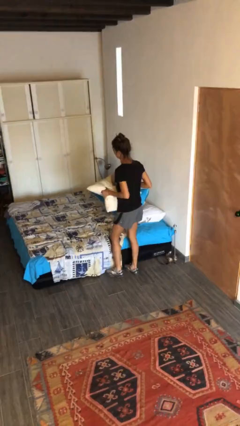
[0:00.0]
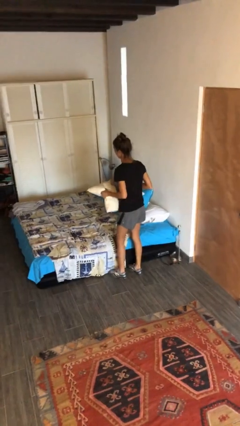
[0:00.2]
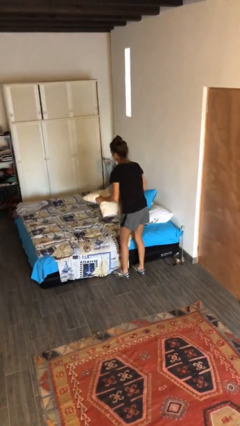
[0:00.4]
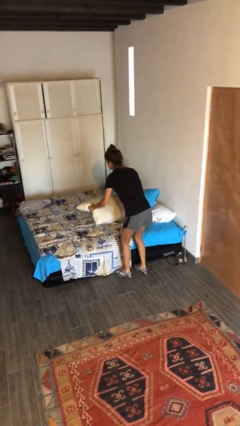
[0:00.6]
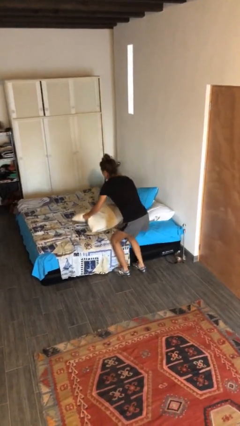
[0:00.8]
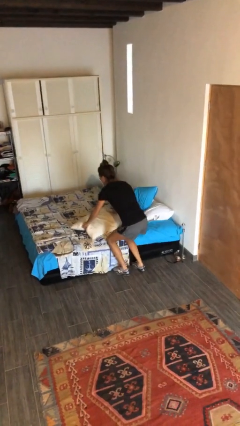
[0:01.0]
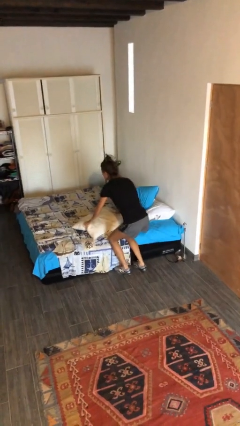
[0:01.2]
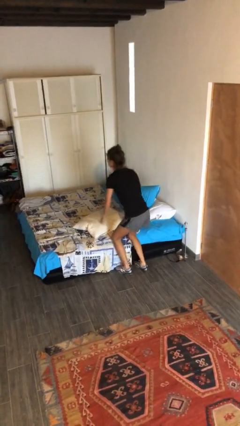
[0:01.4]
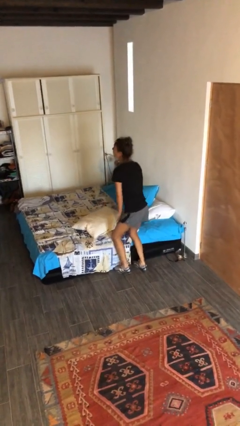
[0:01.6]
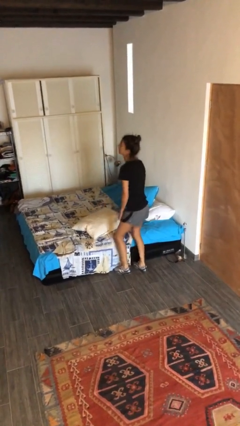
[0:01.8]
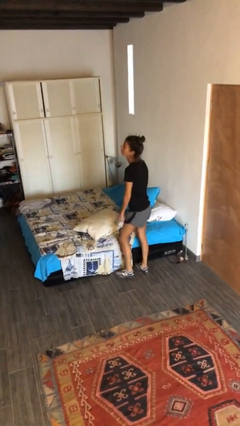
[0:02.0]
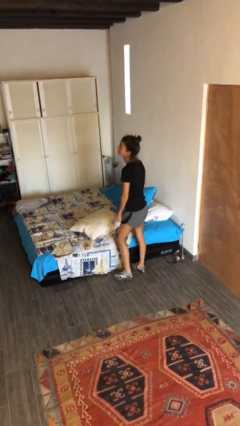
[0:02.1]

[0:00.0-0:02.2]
person puts down object on bed

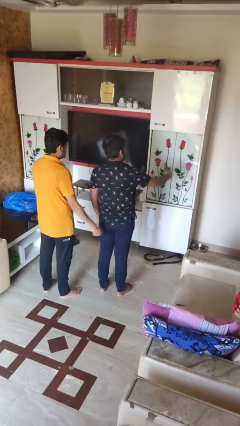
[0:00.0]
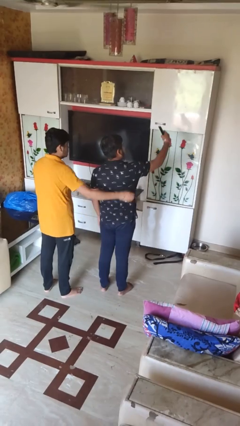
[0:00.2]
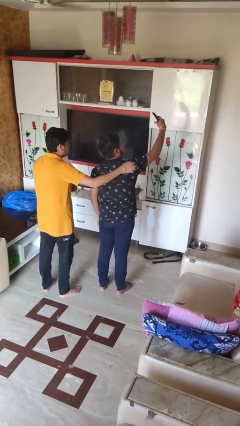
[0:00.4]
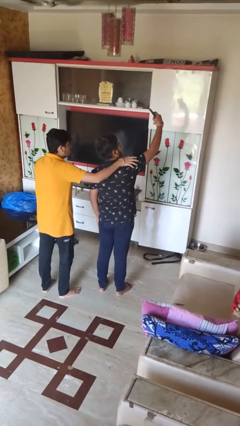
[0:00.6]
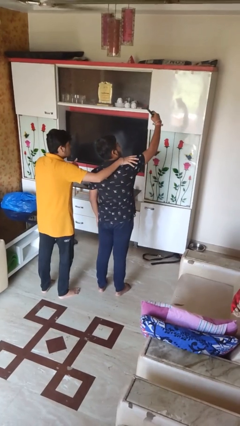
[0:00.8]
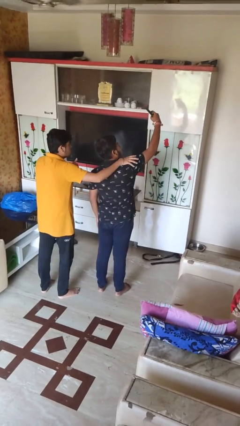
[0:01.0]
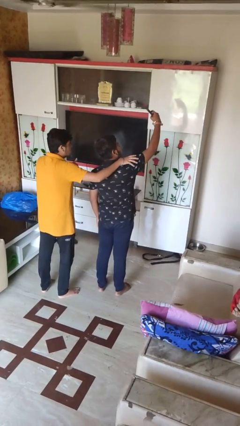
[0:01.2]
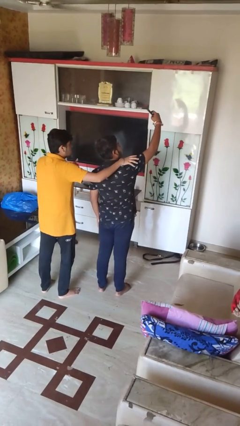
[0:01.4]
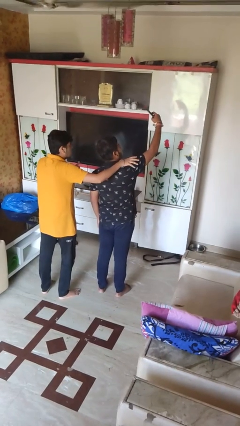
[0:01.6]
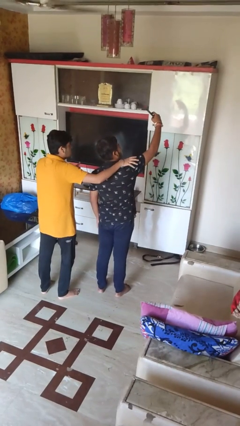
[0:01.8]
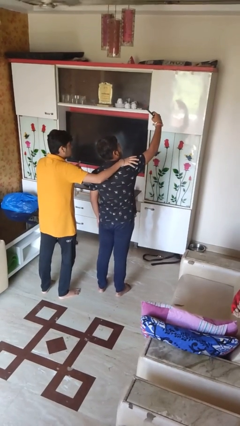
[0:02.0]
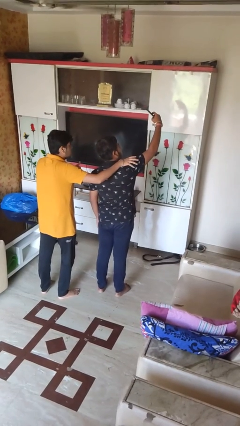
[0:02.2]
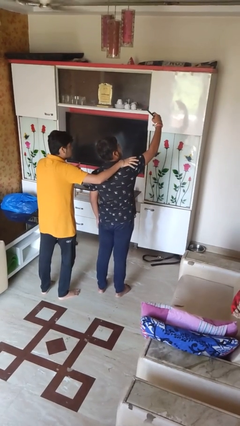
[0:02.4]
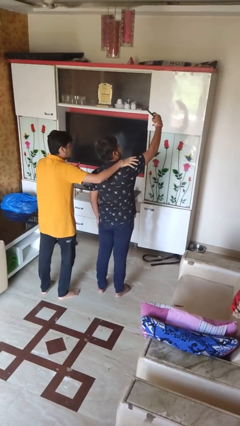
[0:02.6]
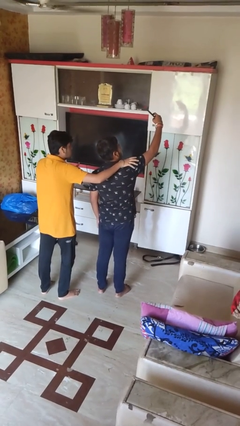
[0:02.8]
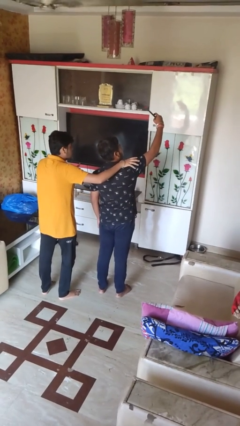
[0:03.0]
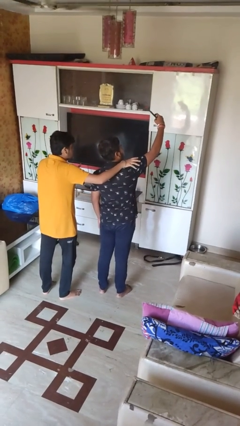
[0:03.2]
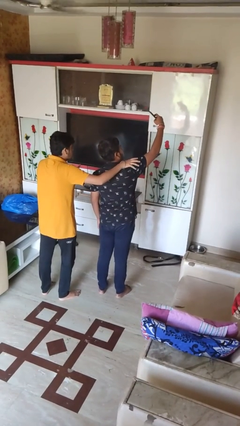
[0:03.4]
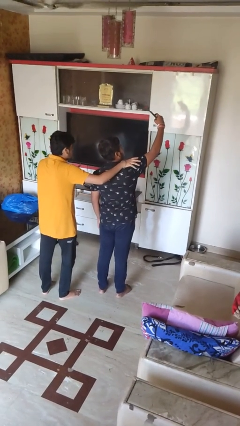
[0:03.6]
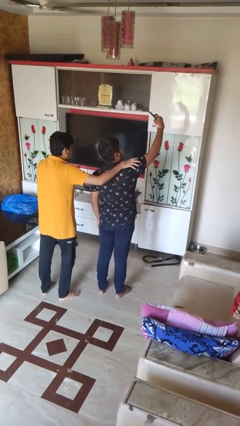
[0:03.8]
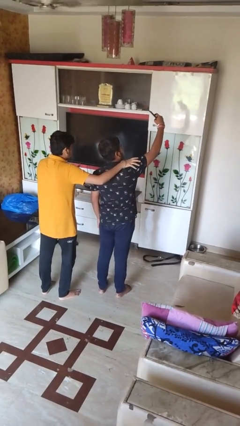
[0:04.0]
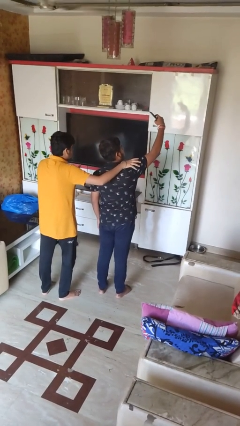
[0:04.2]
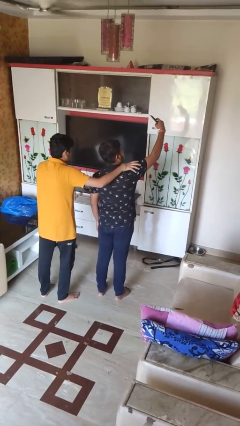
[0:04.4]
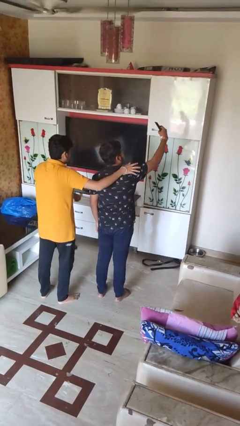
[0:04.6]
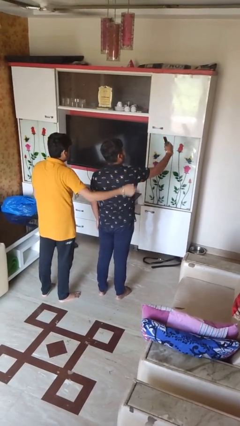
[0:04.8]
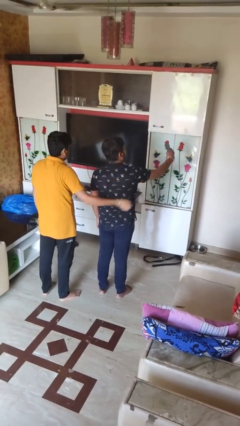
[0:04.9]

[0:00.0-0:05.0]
person takes selfie with person

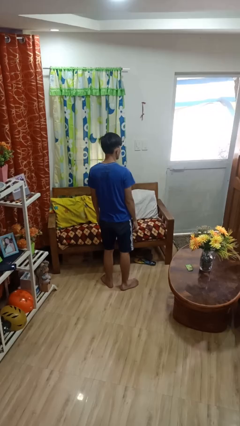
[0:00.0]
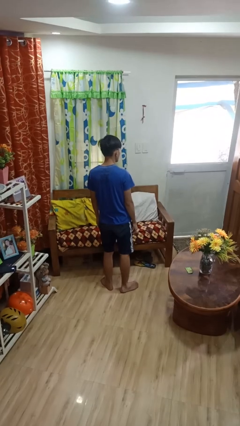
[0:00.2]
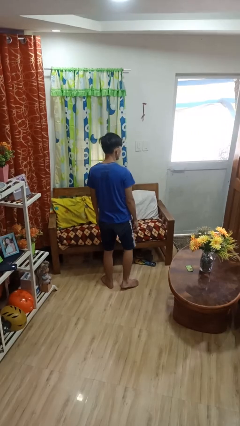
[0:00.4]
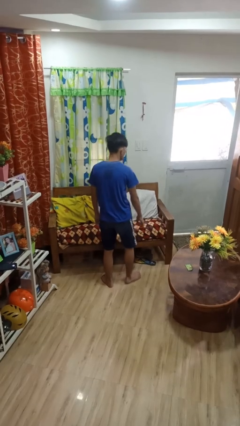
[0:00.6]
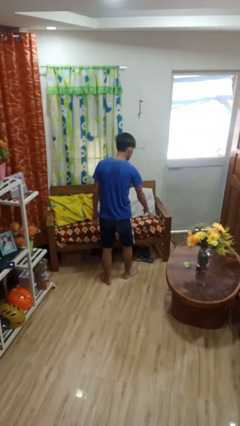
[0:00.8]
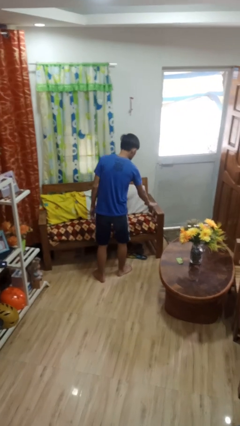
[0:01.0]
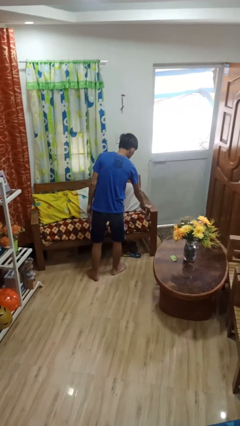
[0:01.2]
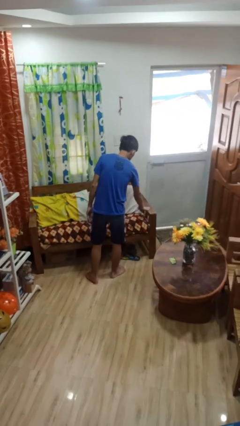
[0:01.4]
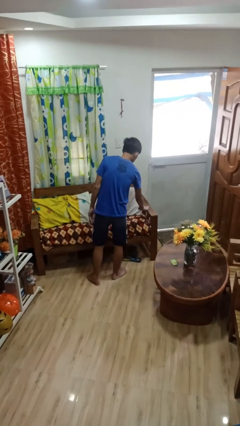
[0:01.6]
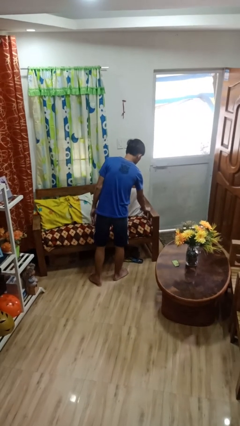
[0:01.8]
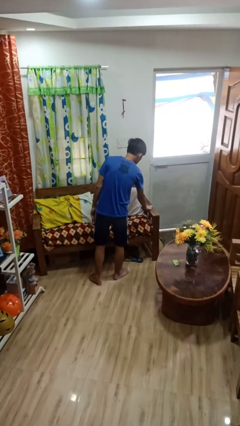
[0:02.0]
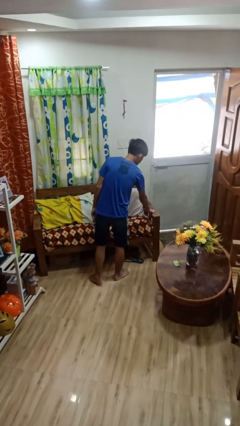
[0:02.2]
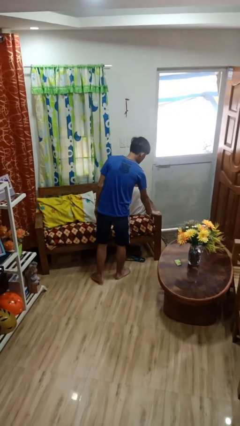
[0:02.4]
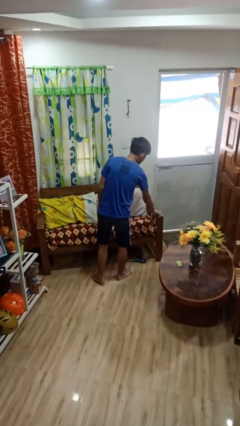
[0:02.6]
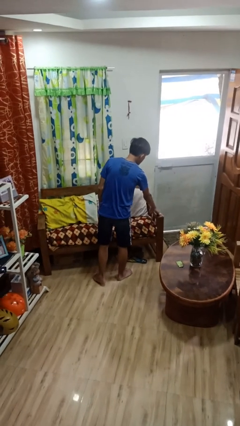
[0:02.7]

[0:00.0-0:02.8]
person taps object with finger

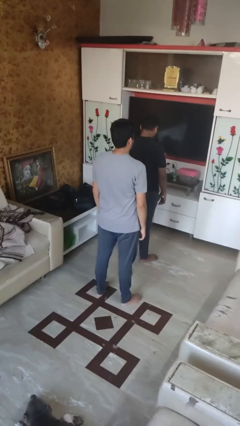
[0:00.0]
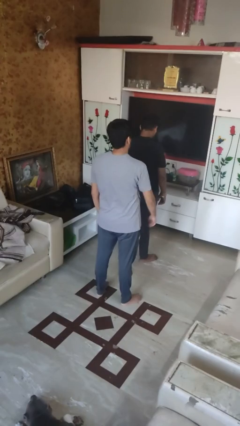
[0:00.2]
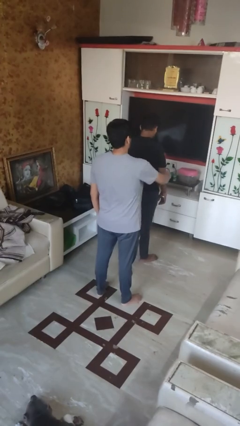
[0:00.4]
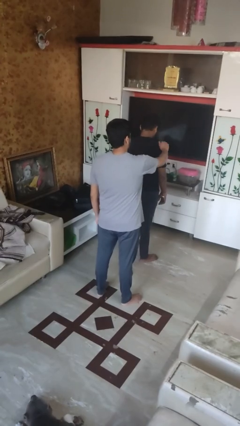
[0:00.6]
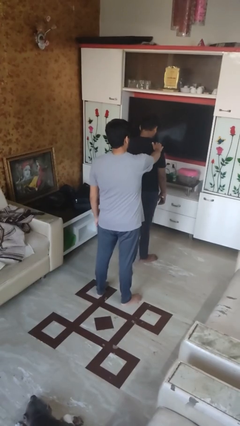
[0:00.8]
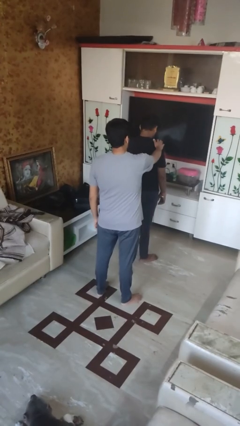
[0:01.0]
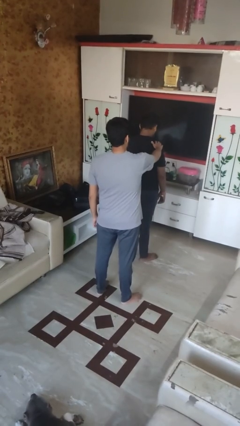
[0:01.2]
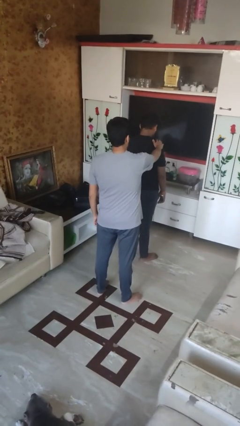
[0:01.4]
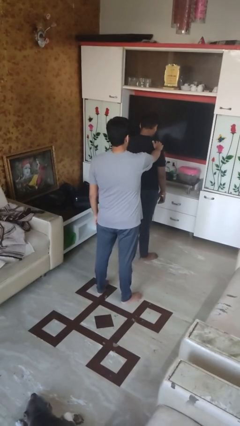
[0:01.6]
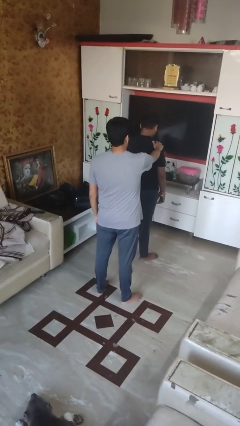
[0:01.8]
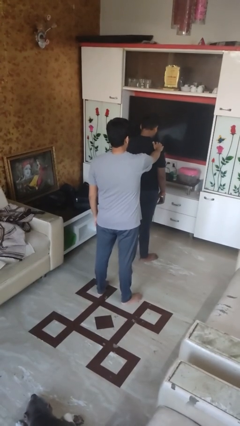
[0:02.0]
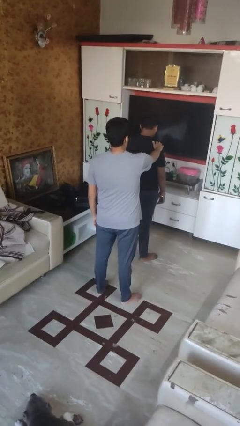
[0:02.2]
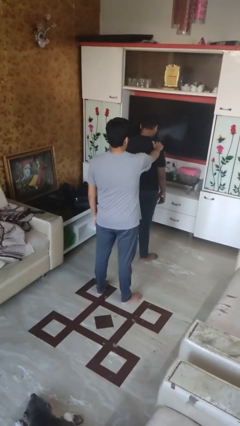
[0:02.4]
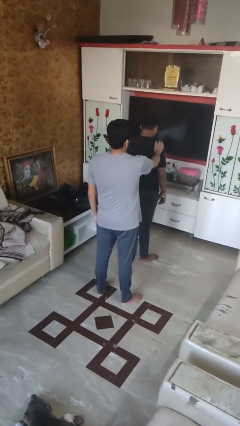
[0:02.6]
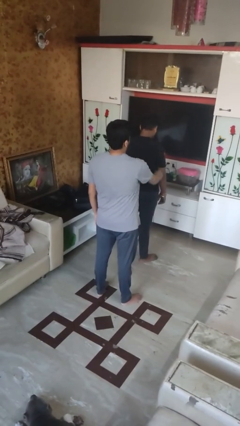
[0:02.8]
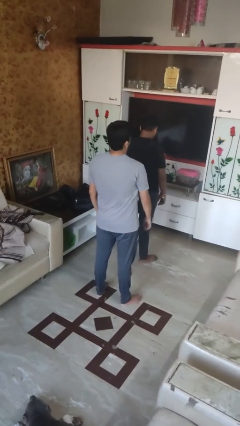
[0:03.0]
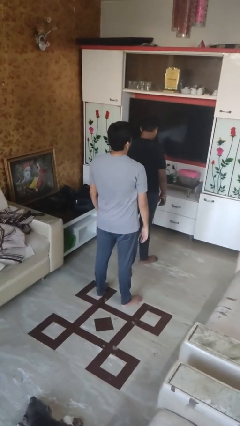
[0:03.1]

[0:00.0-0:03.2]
person pounds shoulders of person

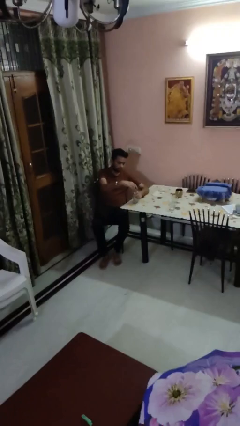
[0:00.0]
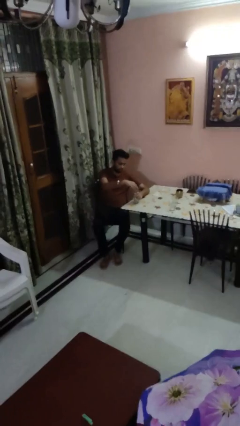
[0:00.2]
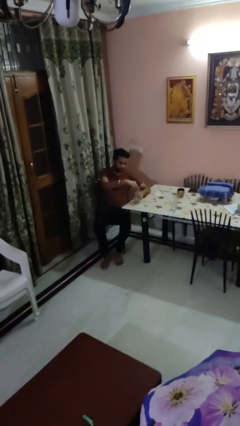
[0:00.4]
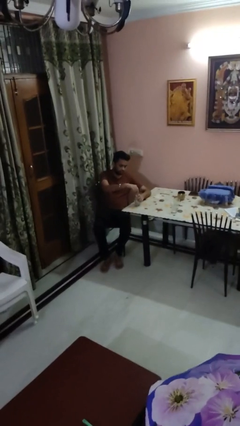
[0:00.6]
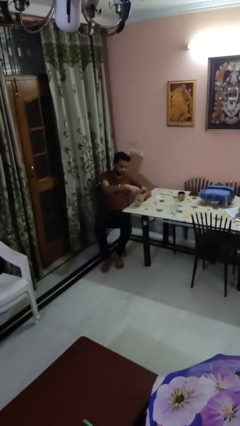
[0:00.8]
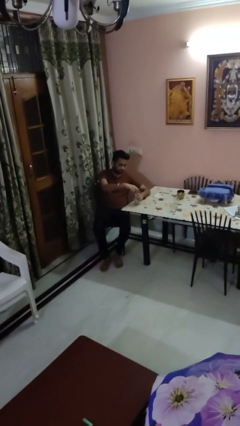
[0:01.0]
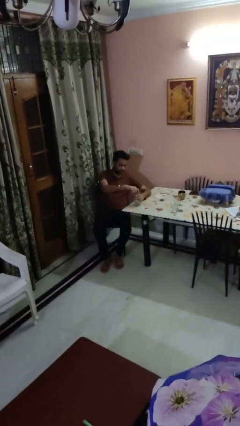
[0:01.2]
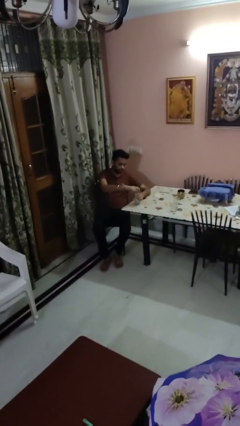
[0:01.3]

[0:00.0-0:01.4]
person screws lid to bottle

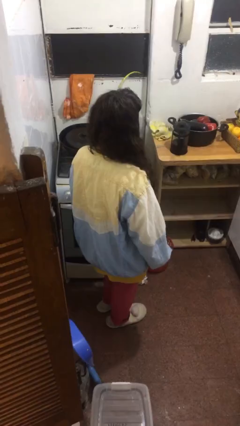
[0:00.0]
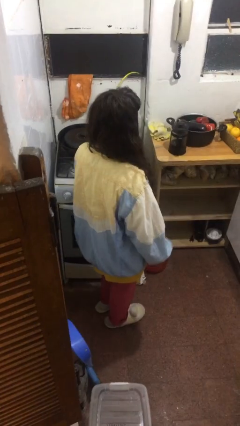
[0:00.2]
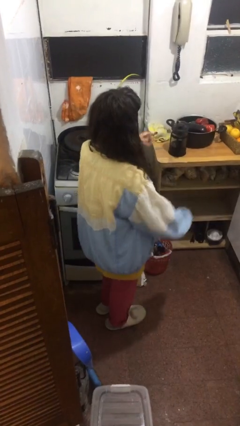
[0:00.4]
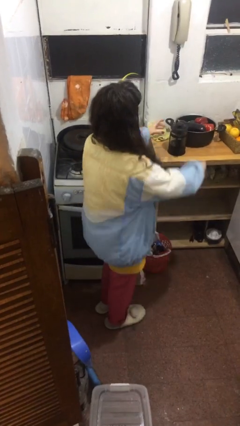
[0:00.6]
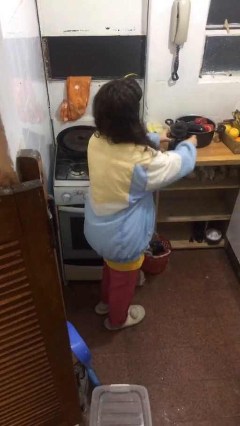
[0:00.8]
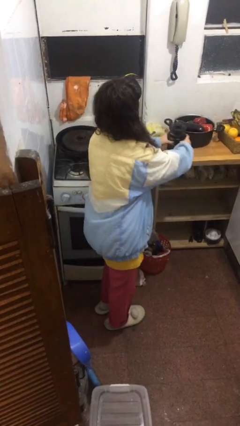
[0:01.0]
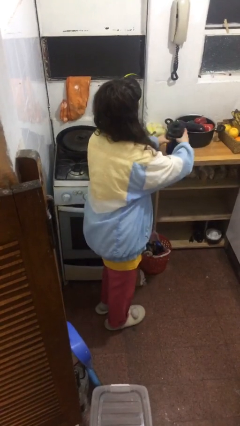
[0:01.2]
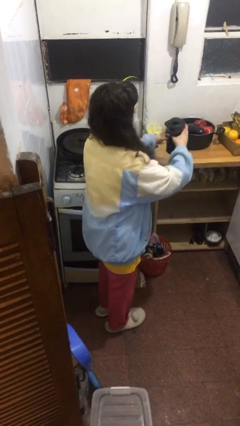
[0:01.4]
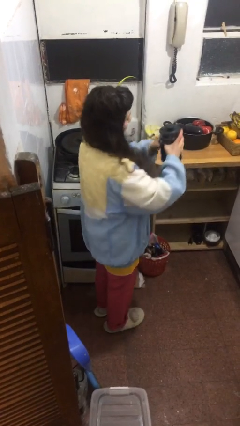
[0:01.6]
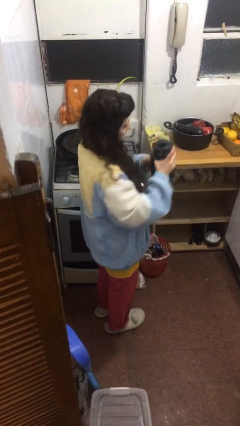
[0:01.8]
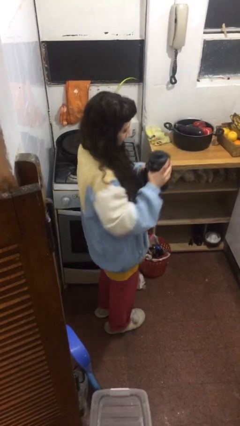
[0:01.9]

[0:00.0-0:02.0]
person picks up object from countertop

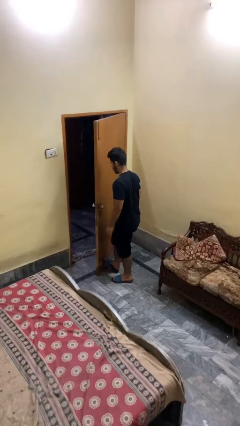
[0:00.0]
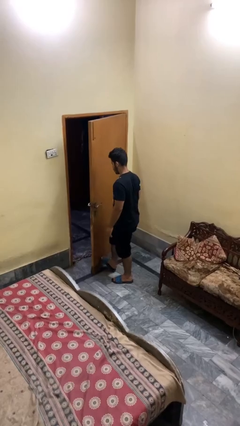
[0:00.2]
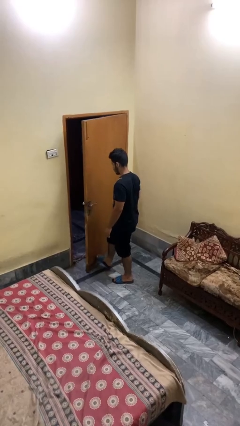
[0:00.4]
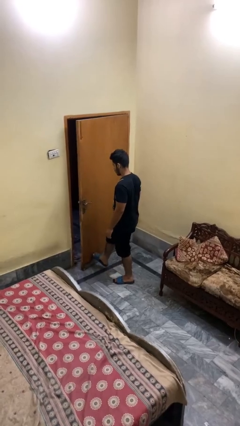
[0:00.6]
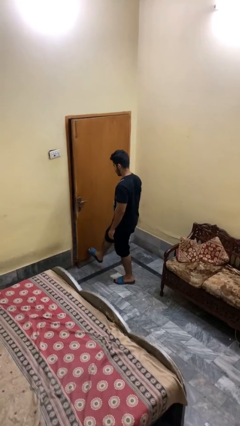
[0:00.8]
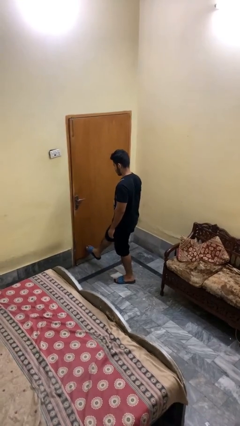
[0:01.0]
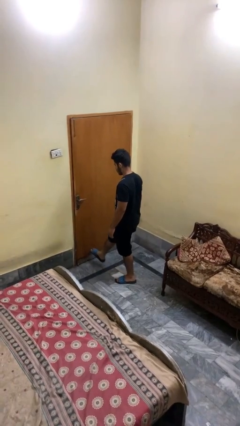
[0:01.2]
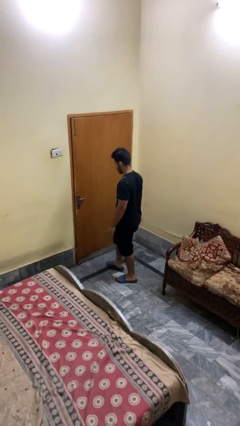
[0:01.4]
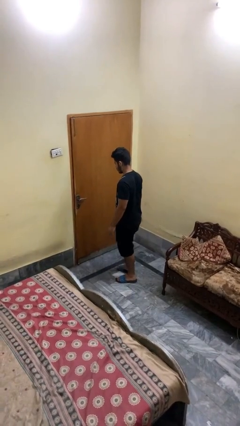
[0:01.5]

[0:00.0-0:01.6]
person closes door with foot
